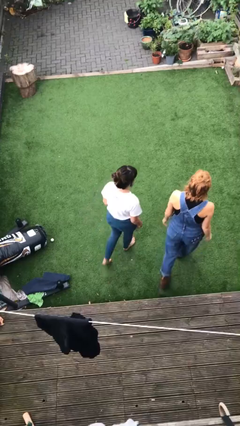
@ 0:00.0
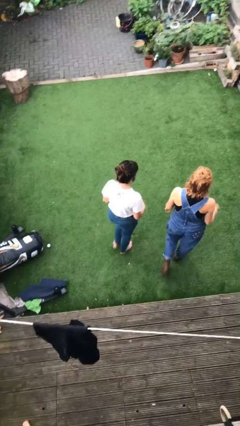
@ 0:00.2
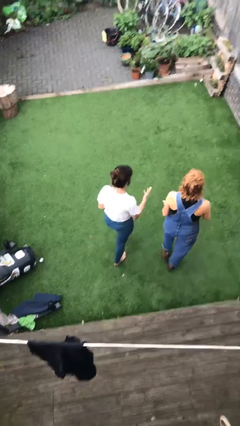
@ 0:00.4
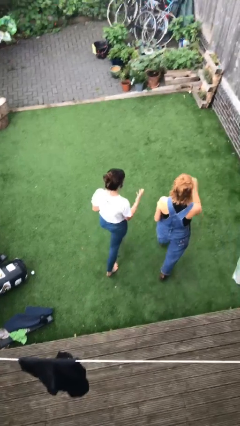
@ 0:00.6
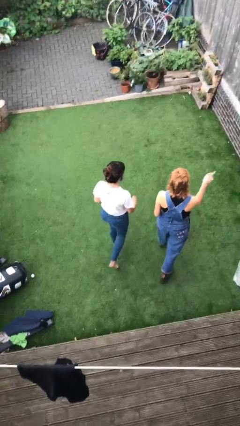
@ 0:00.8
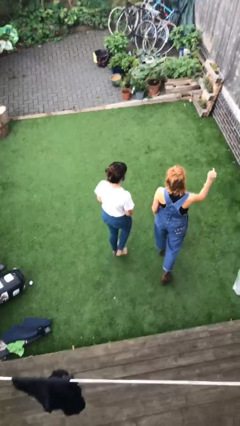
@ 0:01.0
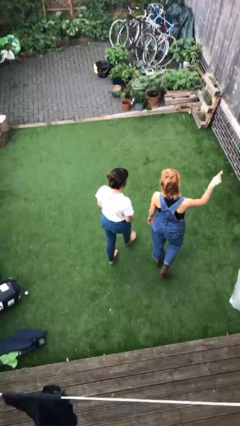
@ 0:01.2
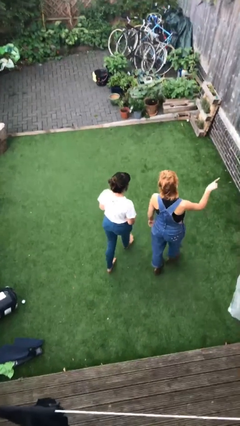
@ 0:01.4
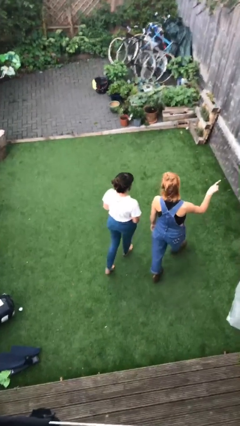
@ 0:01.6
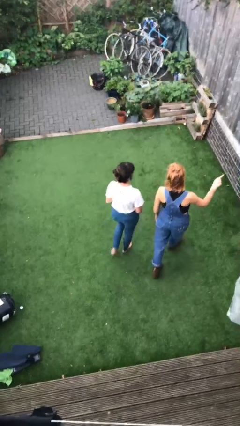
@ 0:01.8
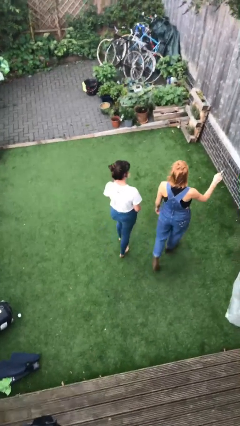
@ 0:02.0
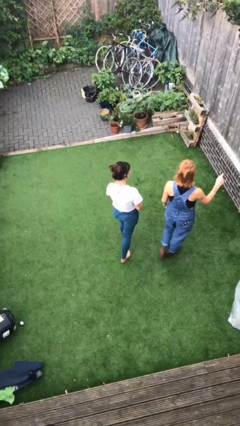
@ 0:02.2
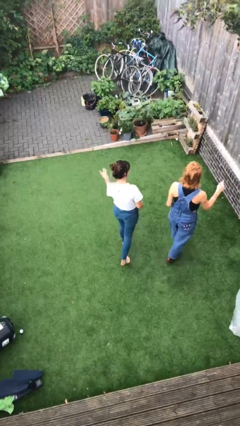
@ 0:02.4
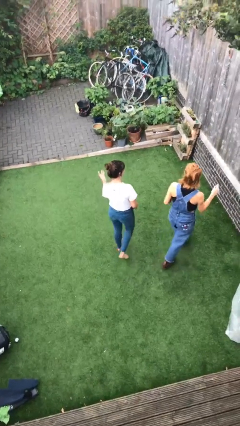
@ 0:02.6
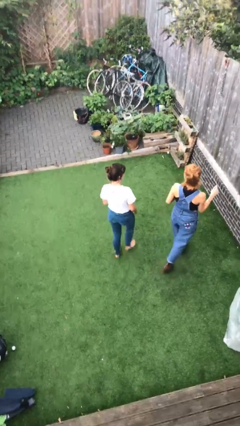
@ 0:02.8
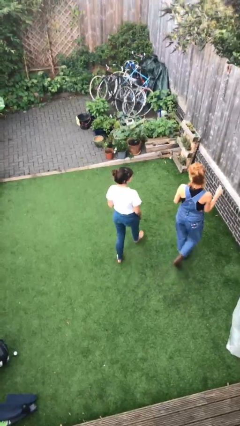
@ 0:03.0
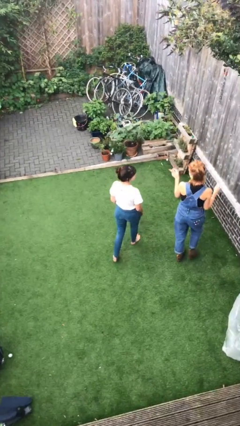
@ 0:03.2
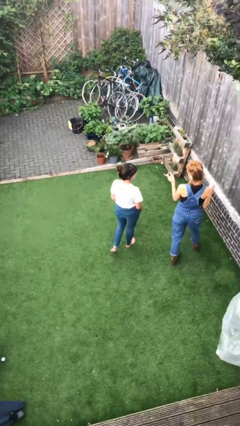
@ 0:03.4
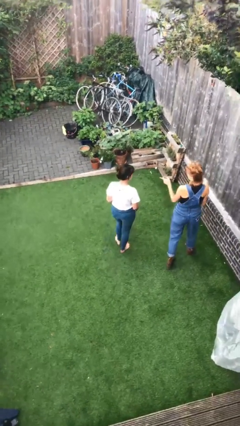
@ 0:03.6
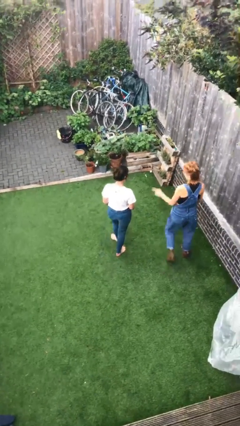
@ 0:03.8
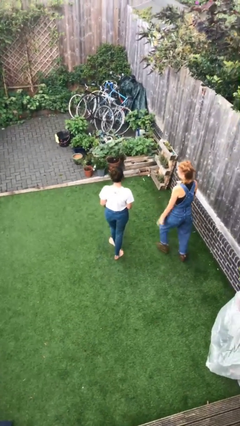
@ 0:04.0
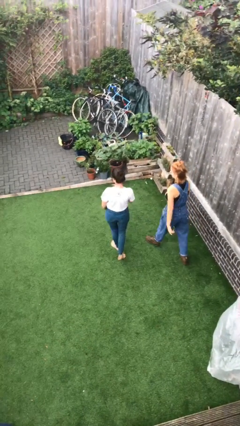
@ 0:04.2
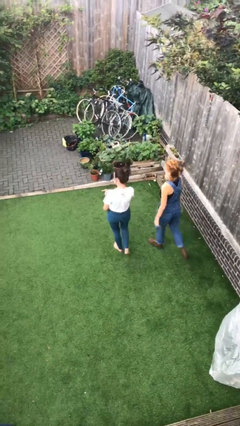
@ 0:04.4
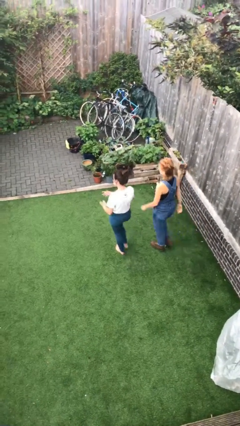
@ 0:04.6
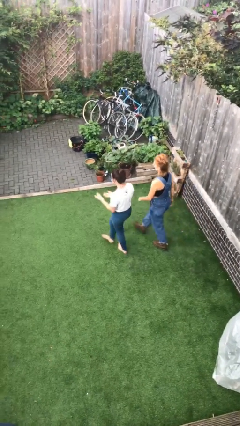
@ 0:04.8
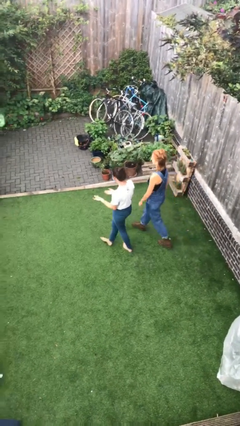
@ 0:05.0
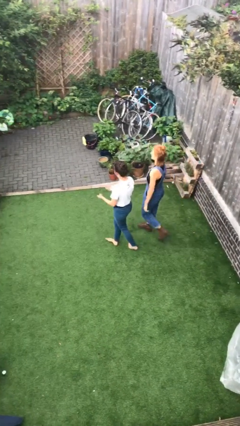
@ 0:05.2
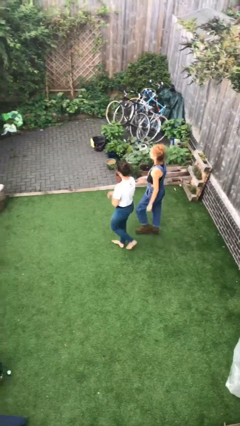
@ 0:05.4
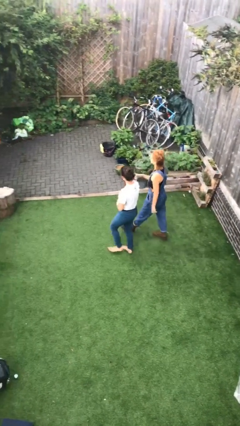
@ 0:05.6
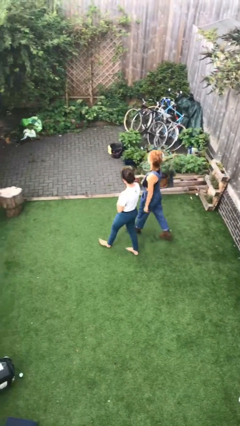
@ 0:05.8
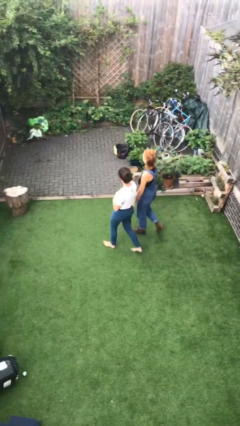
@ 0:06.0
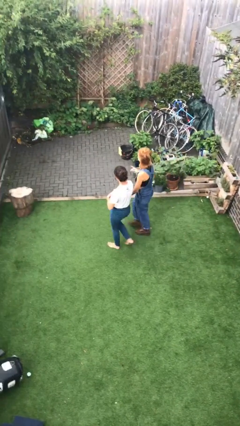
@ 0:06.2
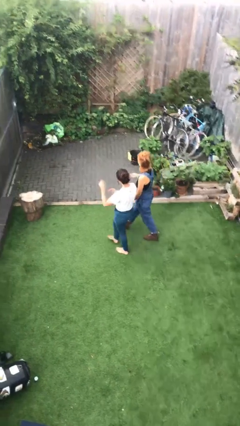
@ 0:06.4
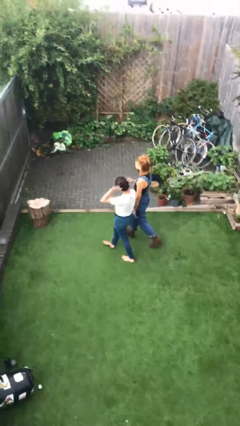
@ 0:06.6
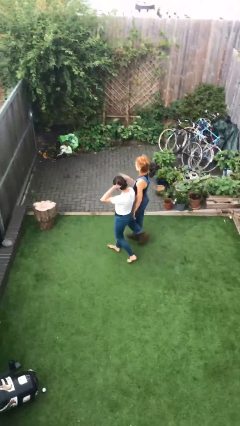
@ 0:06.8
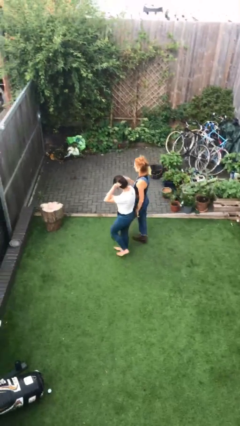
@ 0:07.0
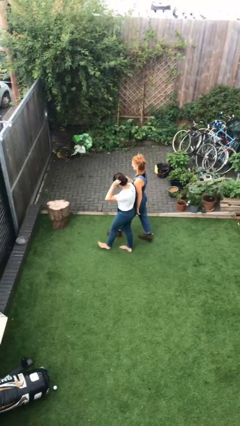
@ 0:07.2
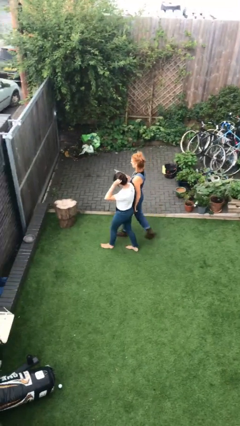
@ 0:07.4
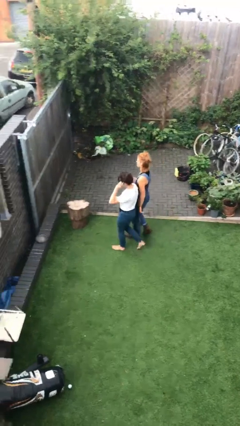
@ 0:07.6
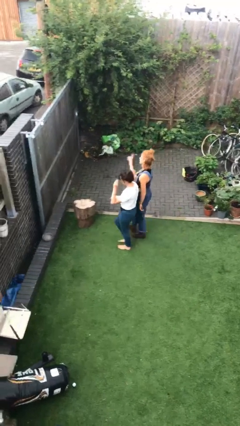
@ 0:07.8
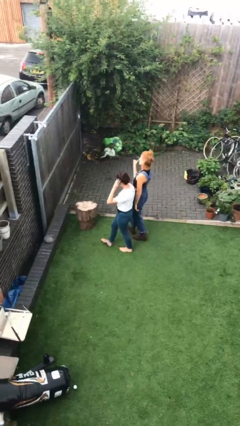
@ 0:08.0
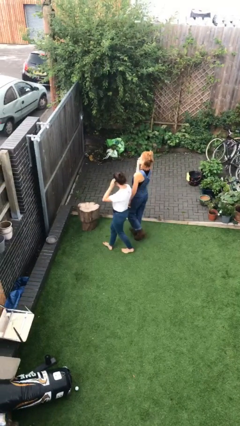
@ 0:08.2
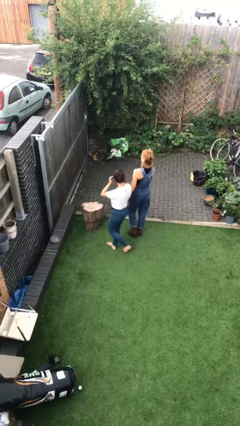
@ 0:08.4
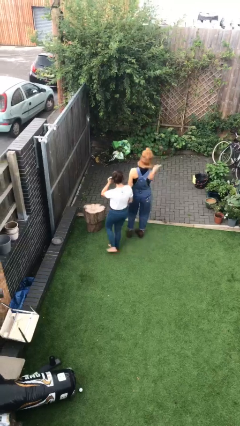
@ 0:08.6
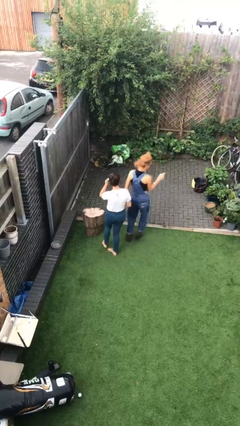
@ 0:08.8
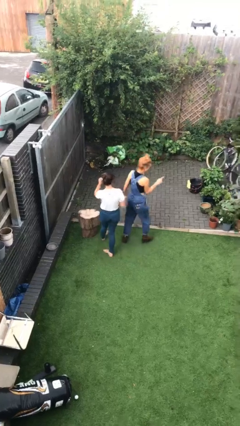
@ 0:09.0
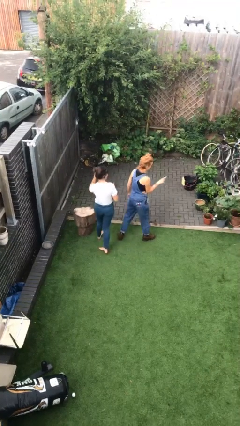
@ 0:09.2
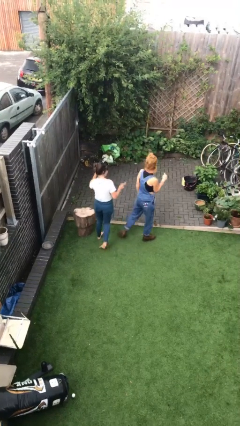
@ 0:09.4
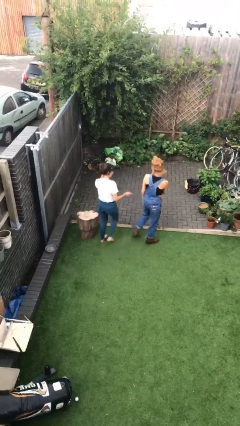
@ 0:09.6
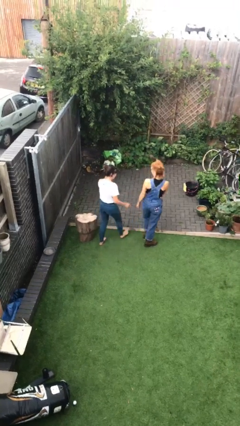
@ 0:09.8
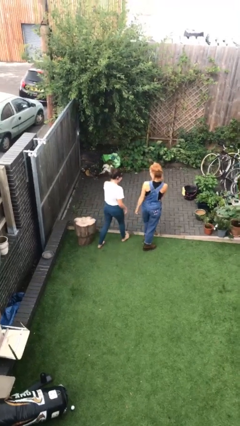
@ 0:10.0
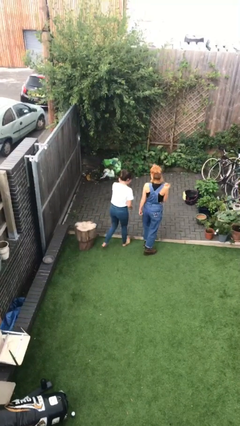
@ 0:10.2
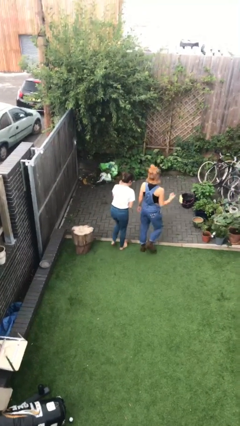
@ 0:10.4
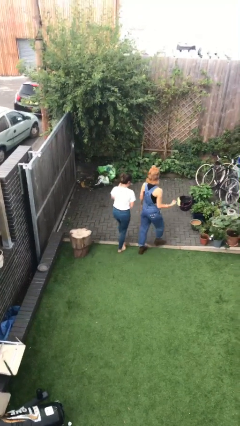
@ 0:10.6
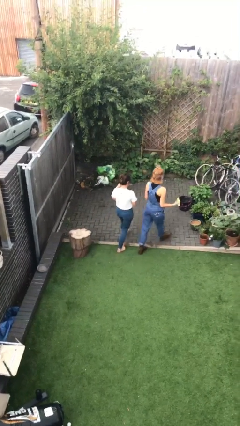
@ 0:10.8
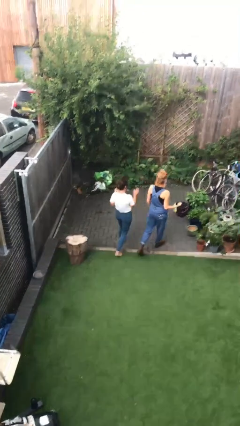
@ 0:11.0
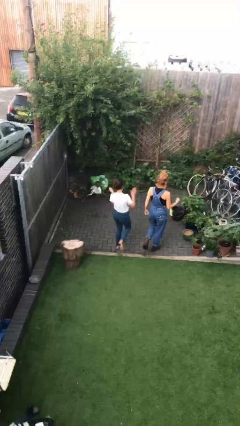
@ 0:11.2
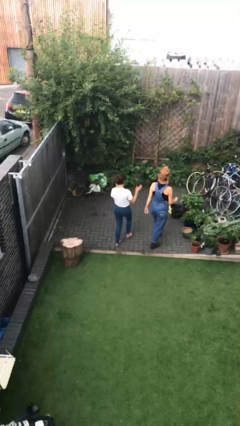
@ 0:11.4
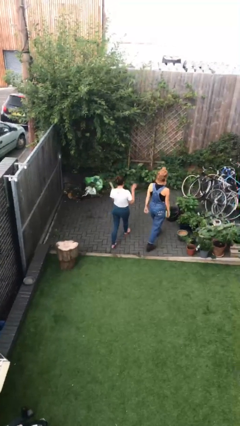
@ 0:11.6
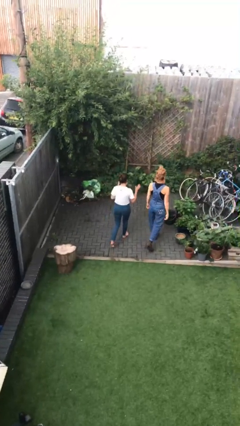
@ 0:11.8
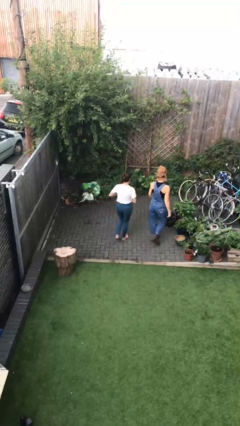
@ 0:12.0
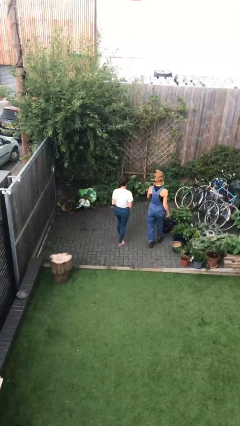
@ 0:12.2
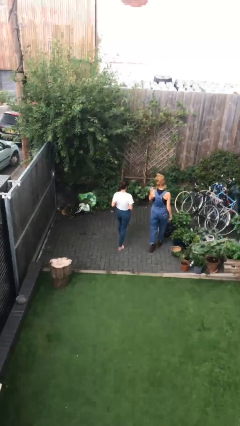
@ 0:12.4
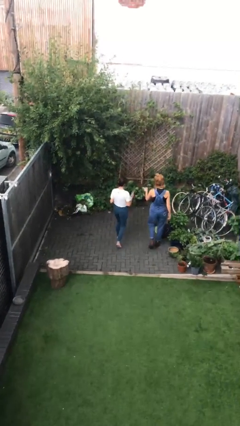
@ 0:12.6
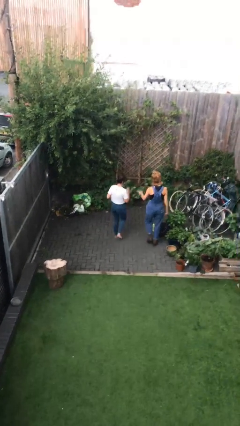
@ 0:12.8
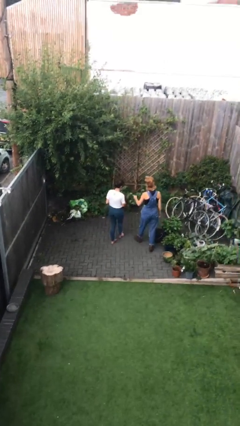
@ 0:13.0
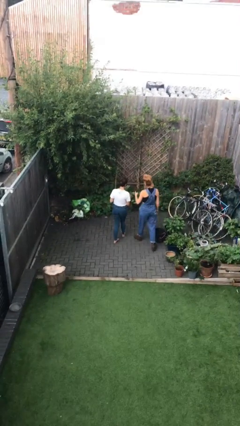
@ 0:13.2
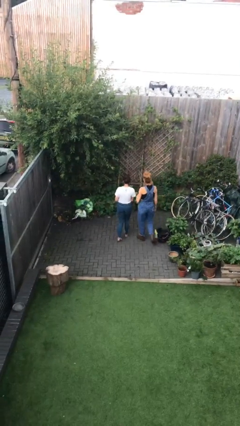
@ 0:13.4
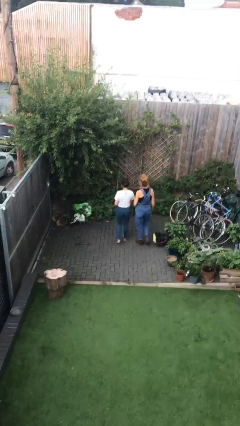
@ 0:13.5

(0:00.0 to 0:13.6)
person talks to person

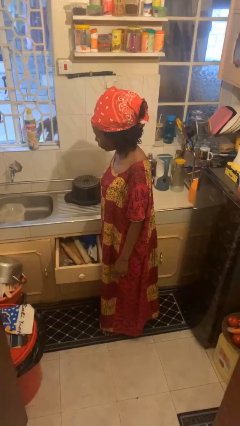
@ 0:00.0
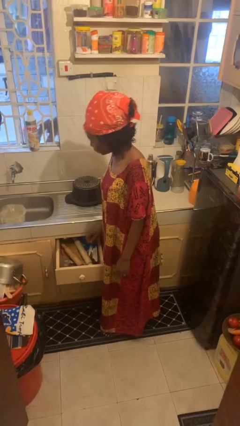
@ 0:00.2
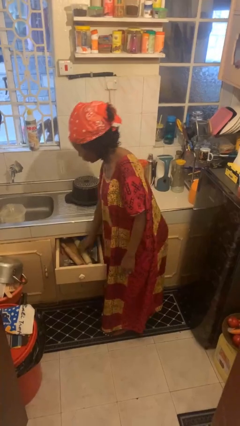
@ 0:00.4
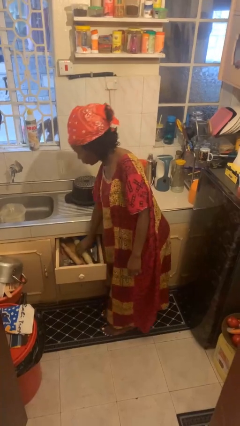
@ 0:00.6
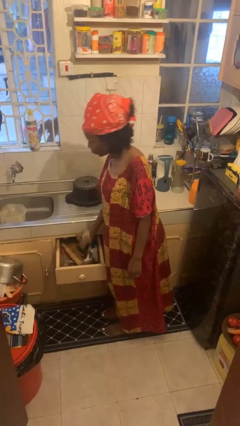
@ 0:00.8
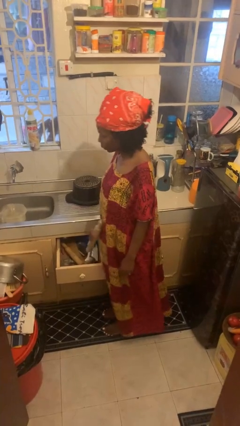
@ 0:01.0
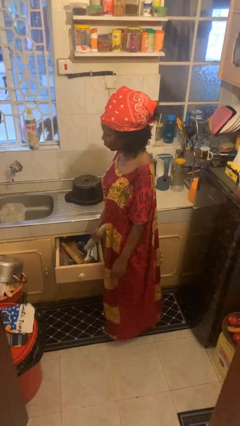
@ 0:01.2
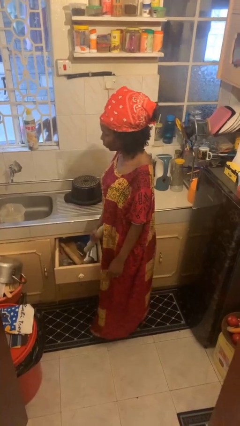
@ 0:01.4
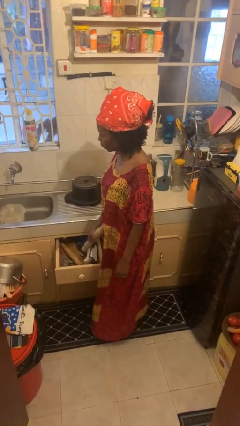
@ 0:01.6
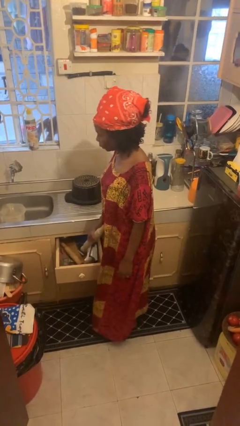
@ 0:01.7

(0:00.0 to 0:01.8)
person takes object from kitchen drawer

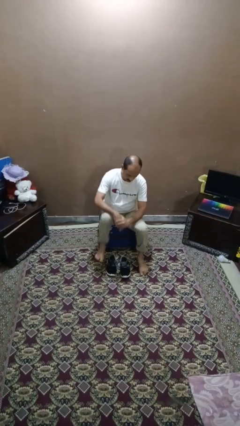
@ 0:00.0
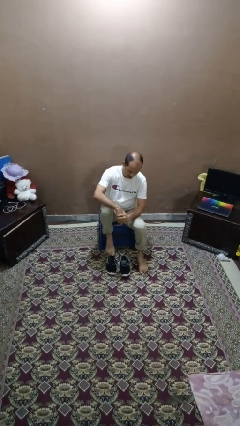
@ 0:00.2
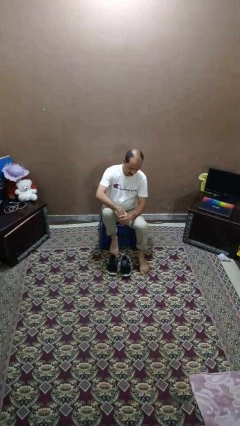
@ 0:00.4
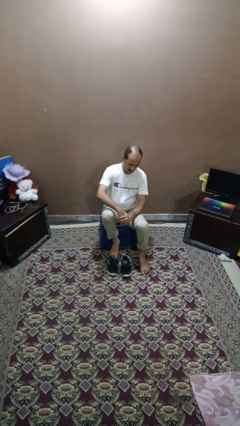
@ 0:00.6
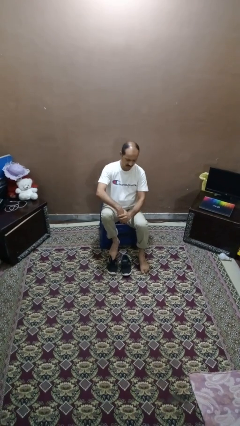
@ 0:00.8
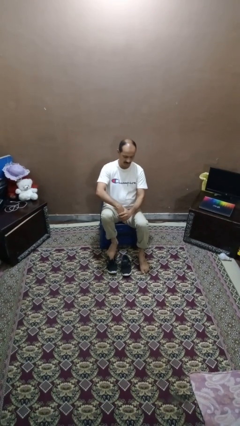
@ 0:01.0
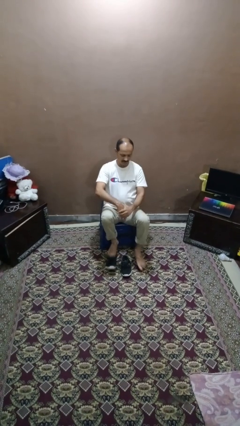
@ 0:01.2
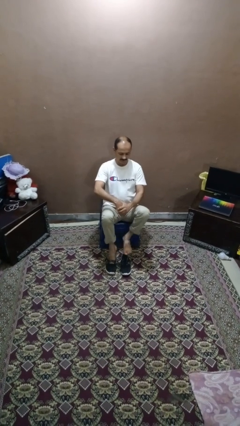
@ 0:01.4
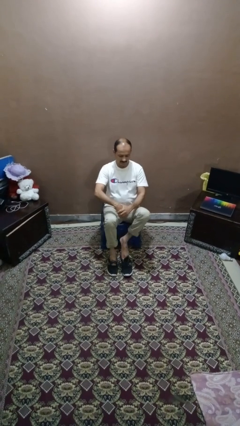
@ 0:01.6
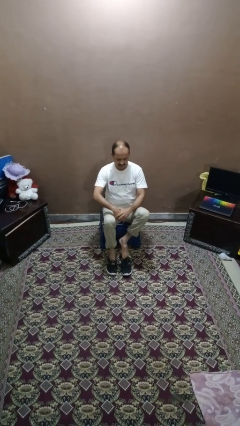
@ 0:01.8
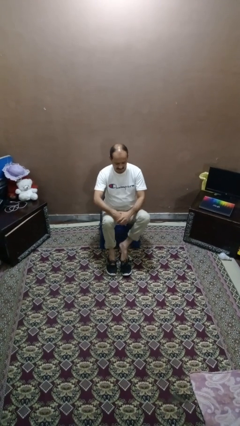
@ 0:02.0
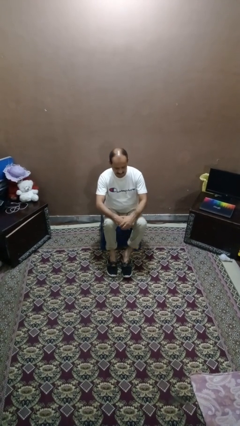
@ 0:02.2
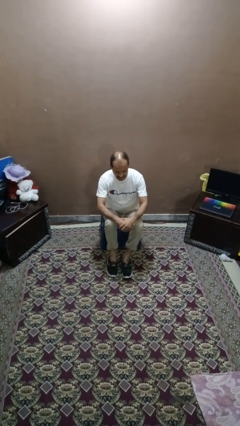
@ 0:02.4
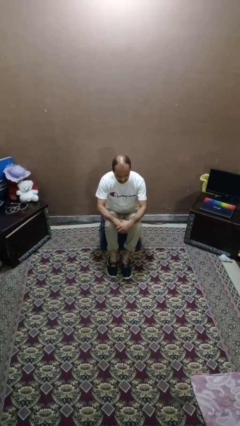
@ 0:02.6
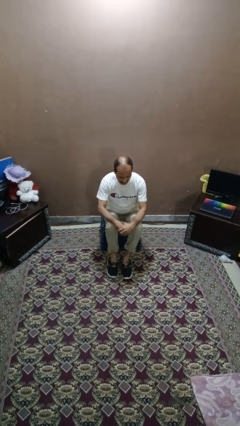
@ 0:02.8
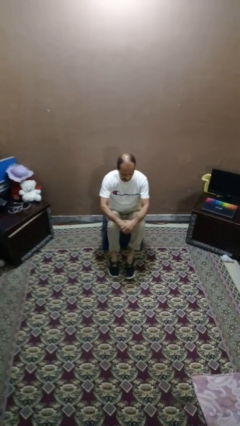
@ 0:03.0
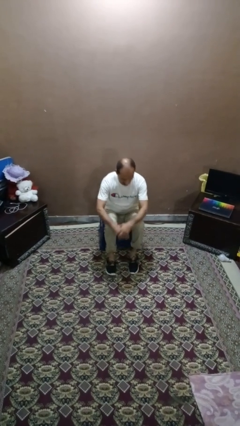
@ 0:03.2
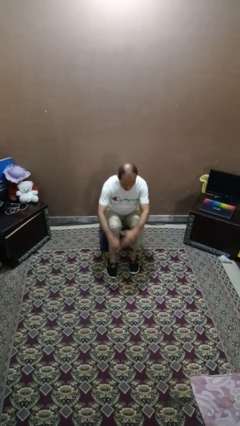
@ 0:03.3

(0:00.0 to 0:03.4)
person puts on shoes
